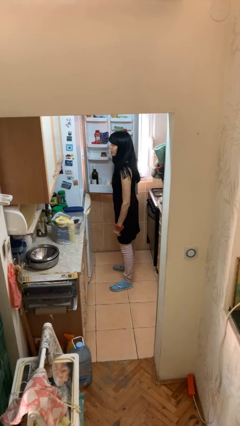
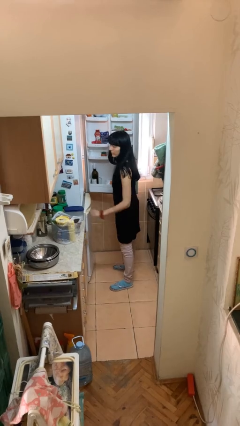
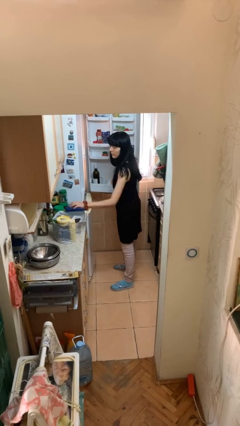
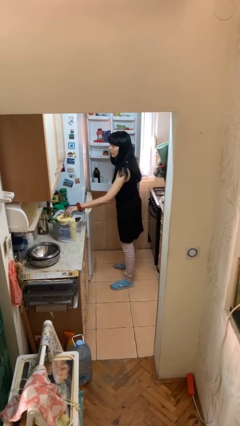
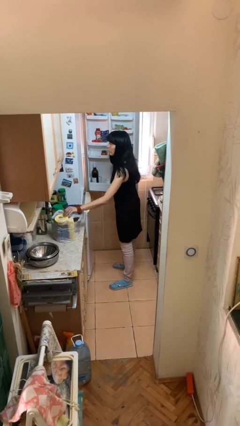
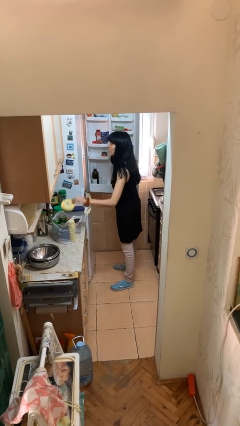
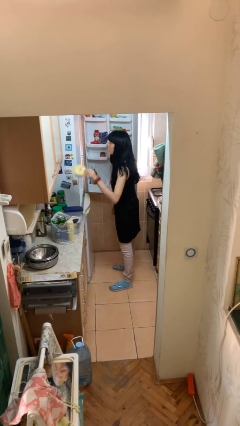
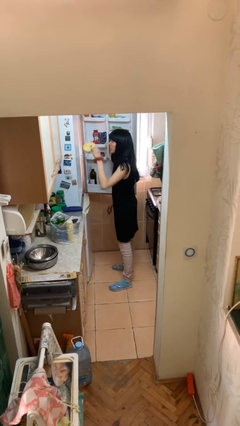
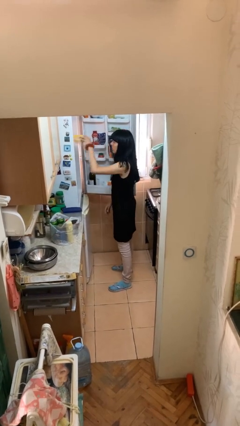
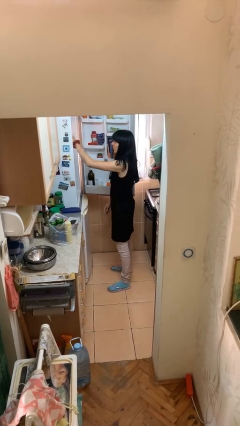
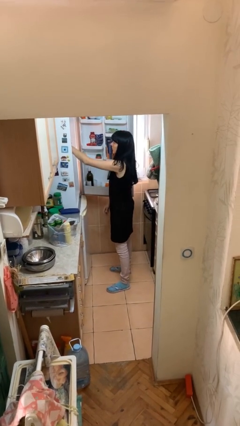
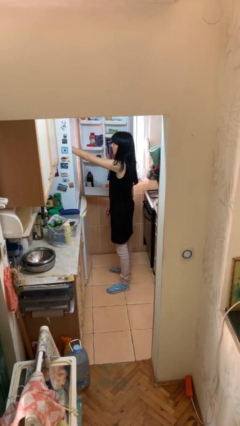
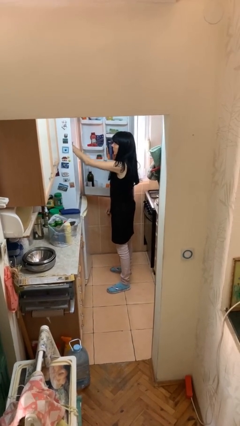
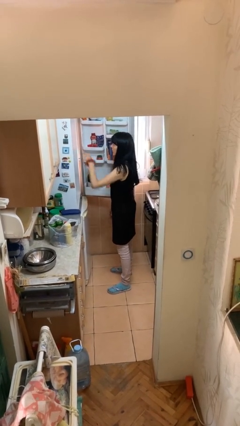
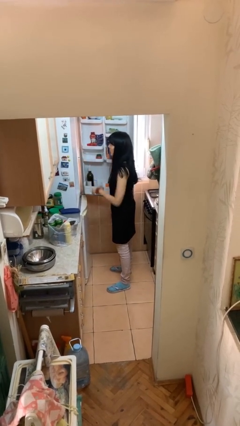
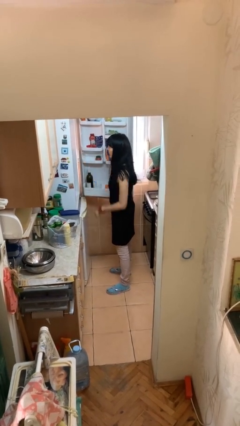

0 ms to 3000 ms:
person loads groceries into refrigerator

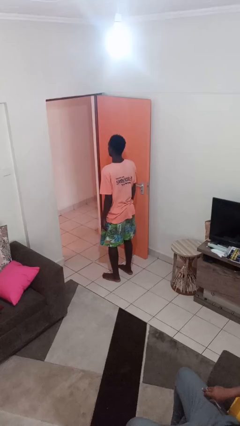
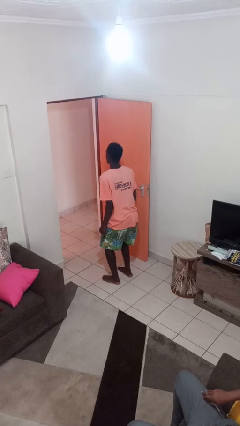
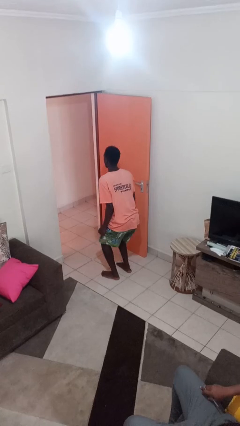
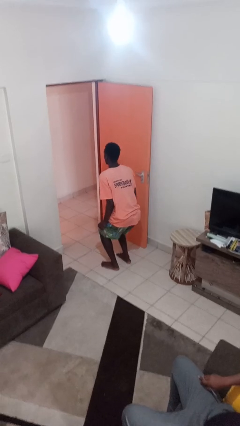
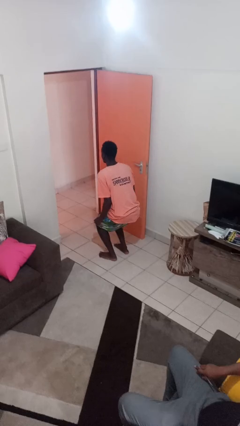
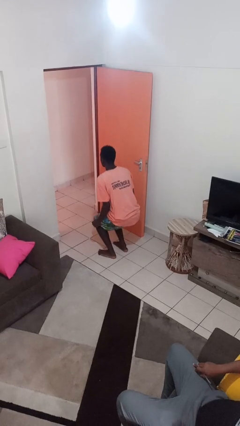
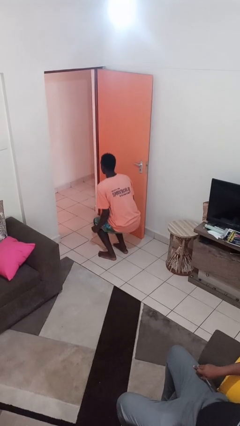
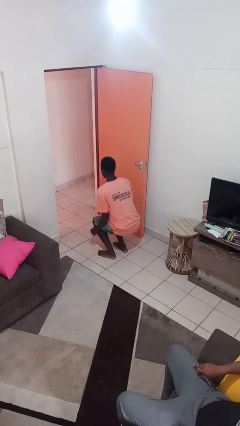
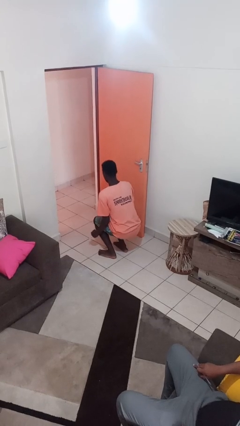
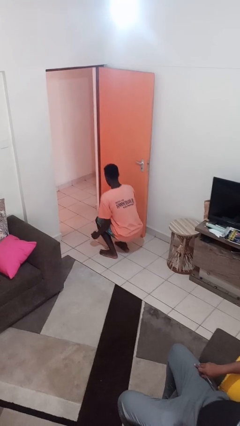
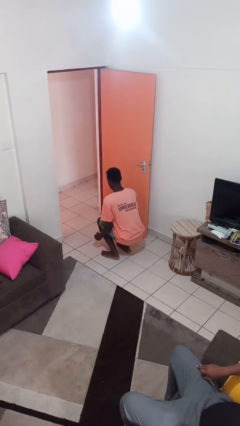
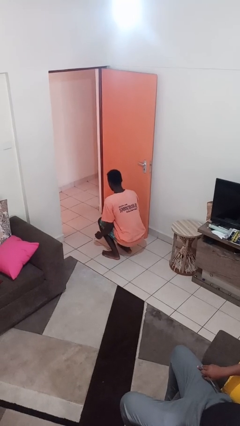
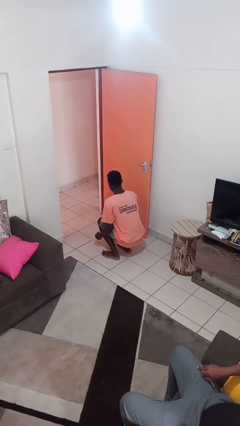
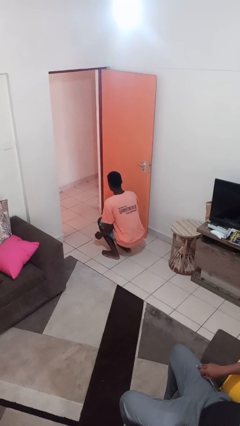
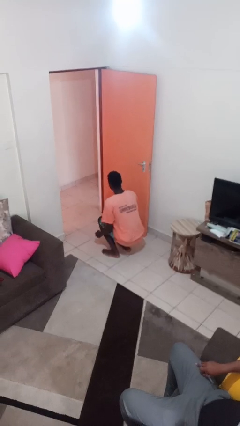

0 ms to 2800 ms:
person squats

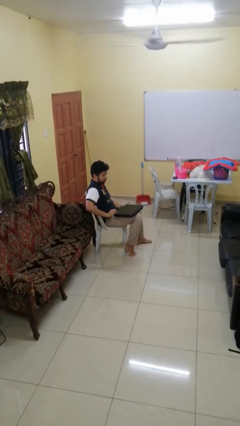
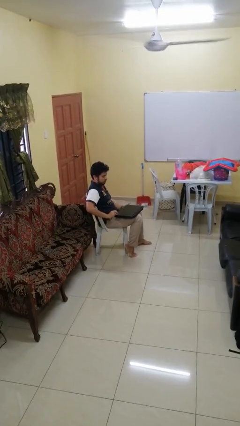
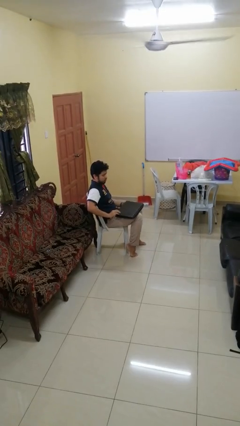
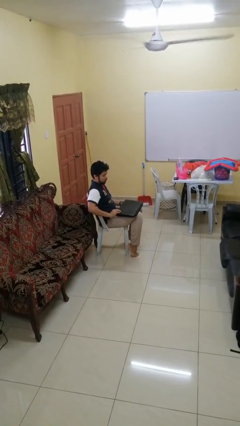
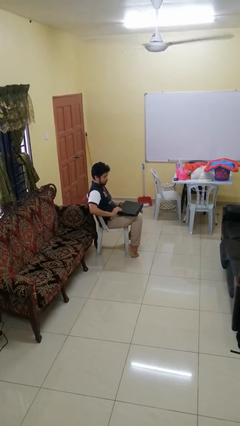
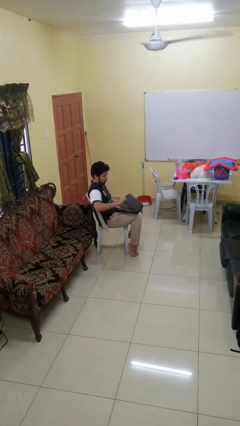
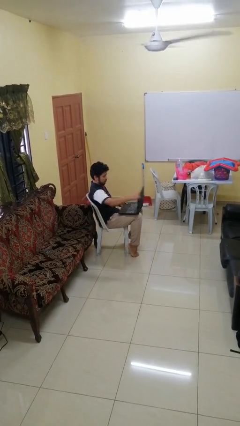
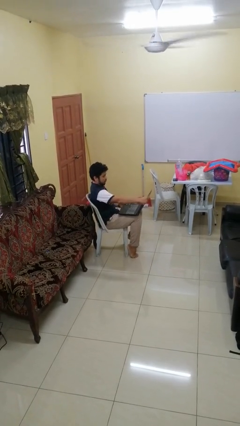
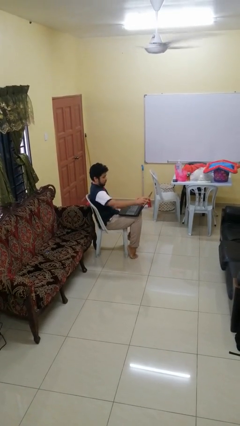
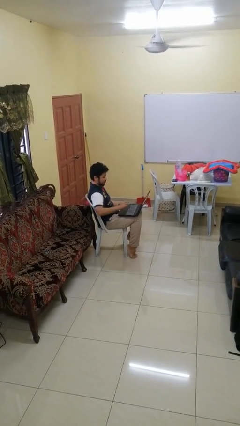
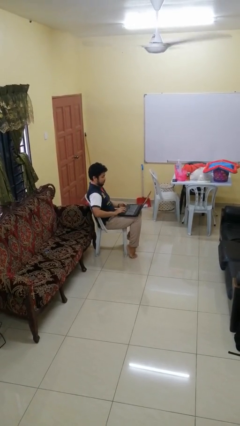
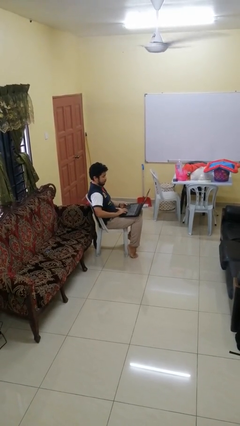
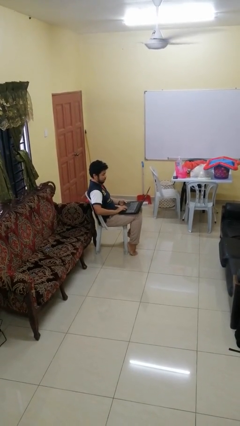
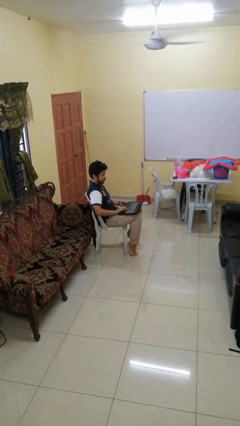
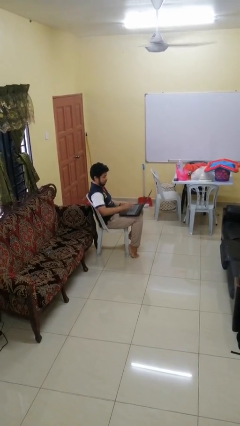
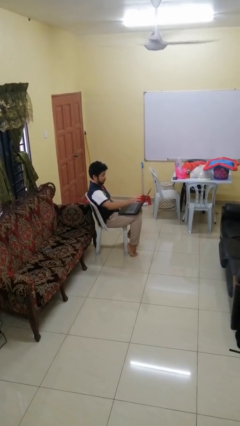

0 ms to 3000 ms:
person opens laptop

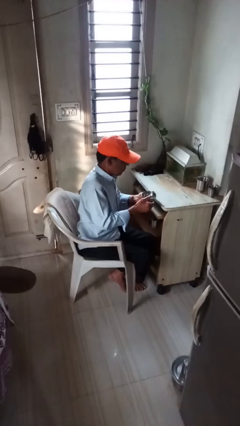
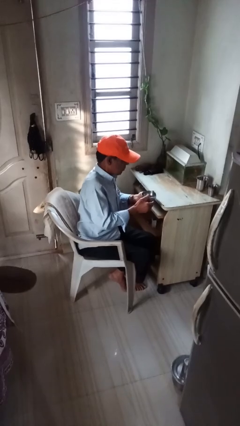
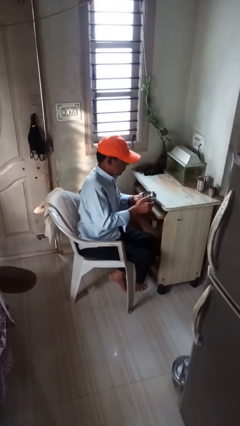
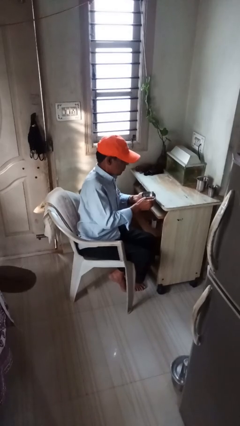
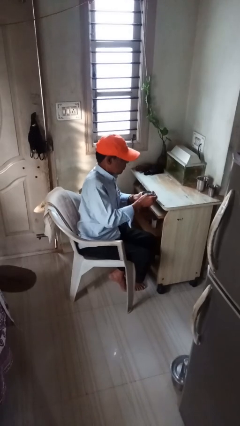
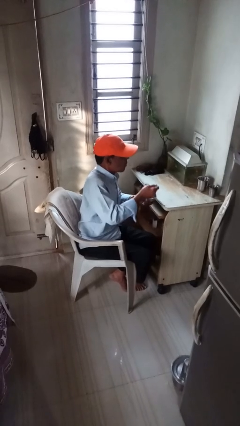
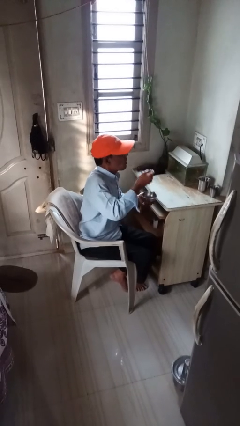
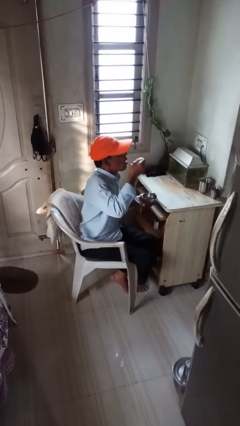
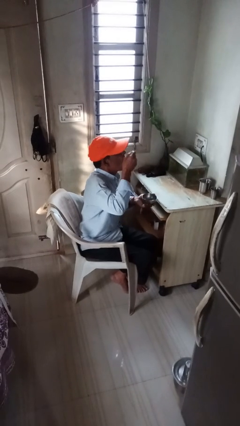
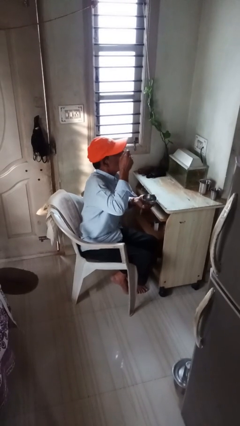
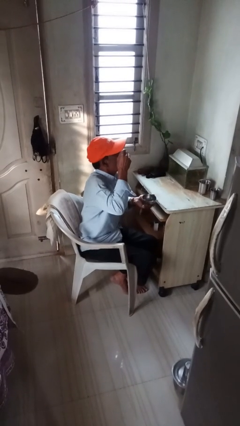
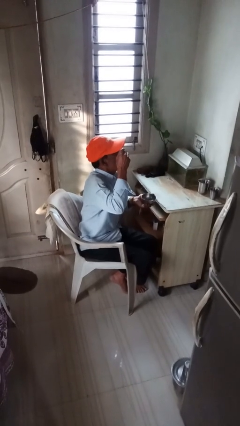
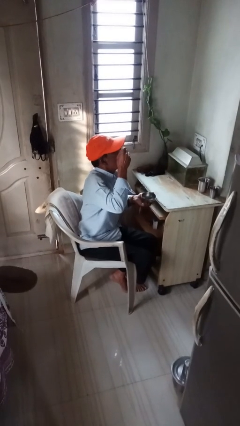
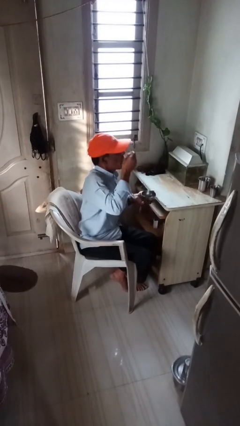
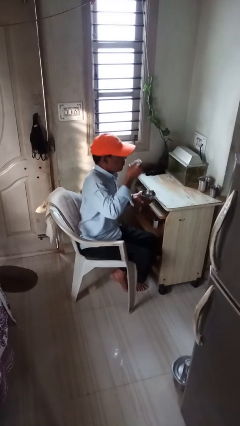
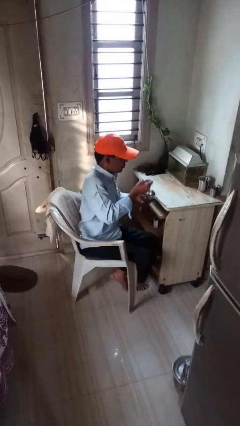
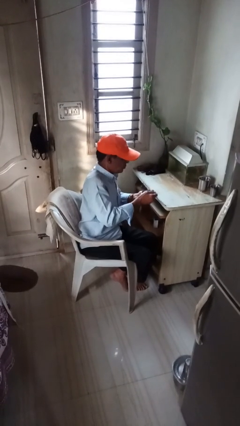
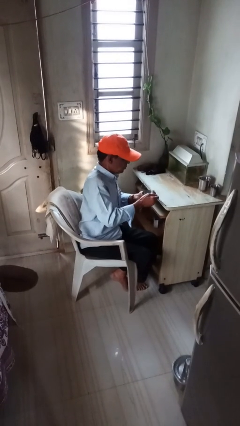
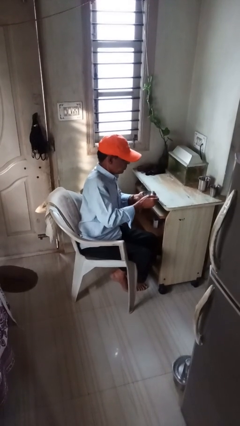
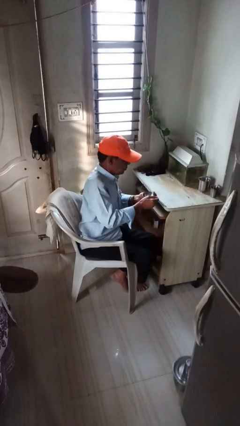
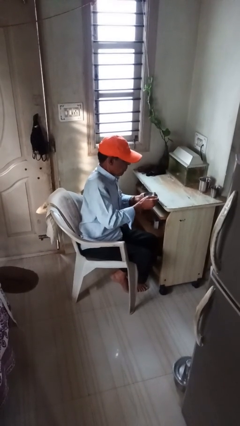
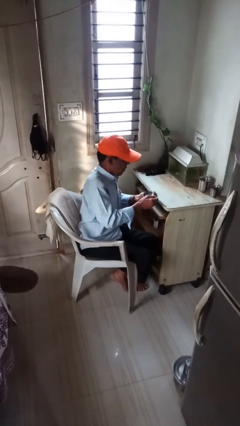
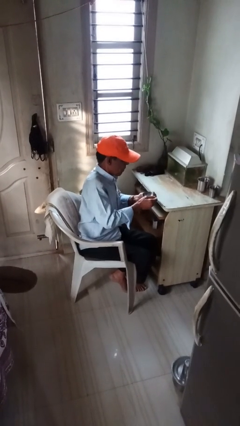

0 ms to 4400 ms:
person eats with utensil

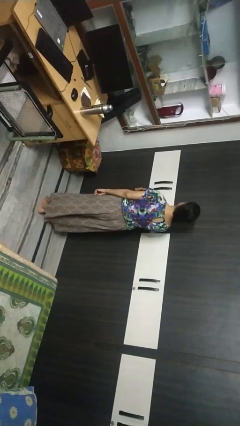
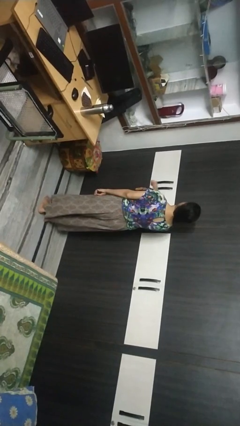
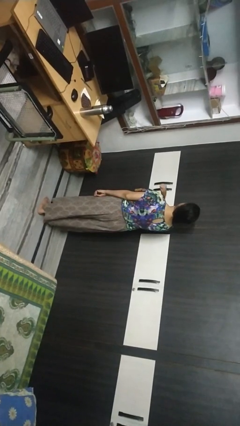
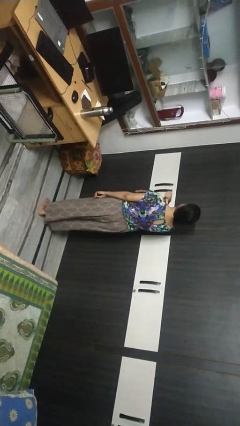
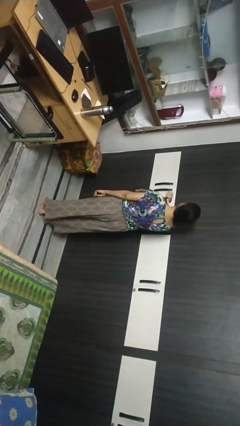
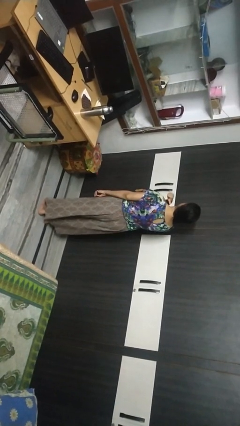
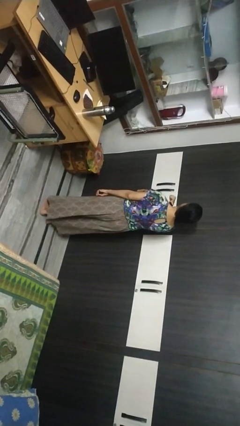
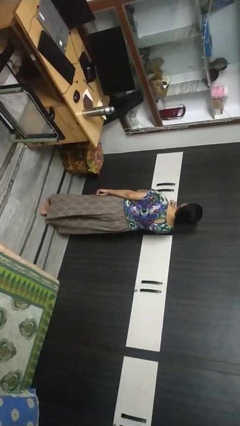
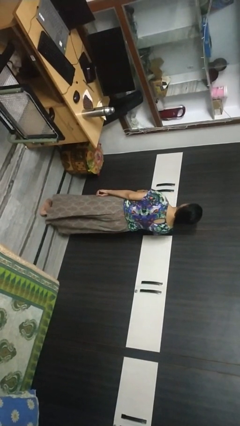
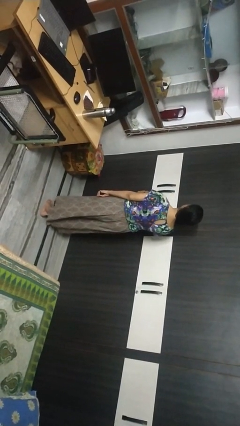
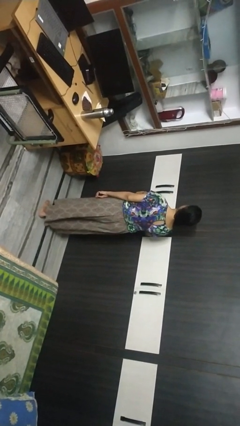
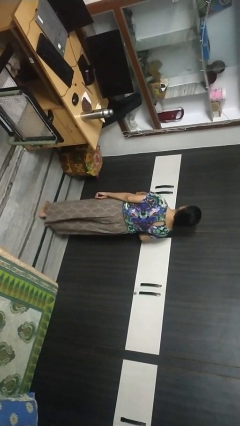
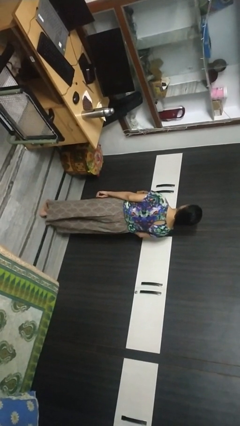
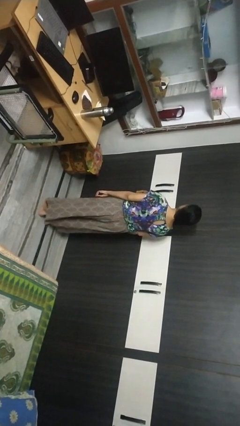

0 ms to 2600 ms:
person gestures cut

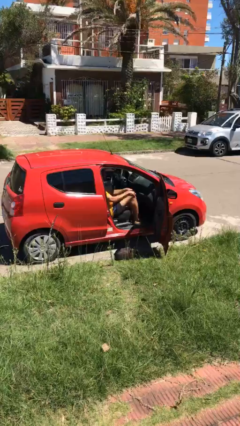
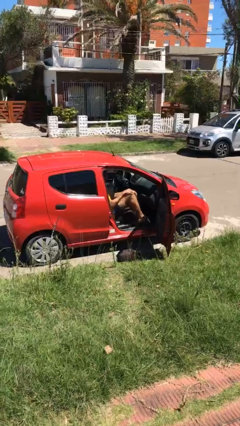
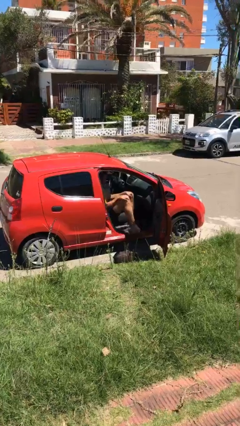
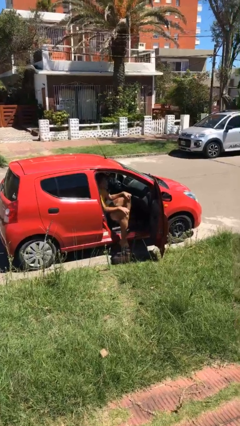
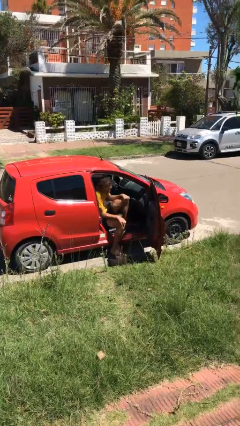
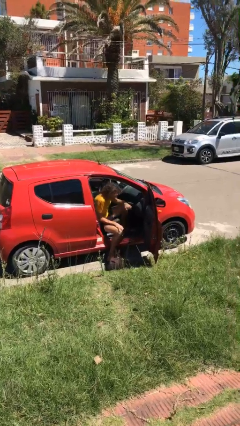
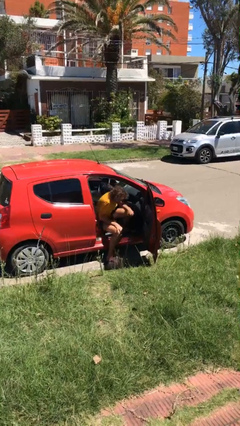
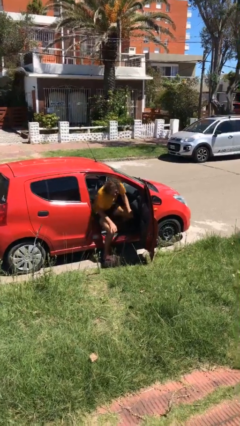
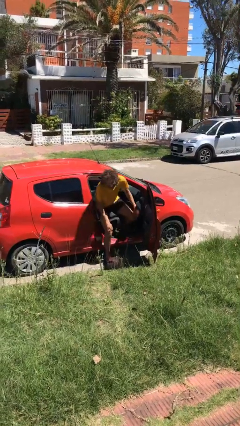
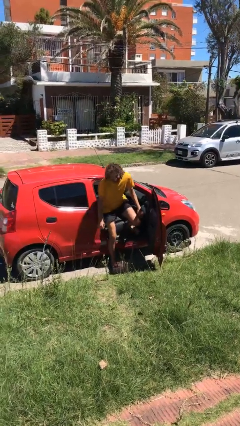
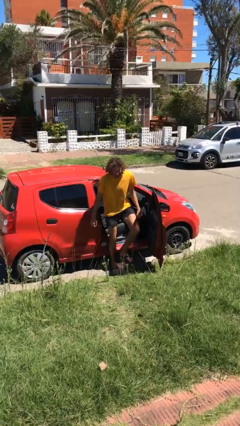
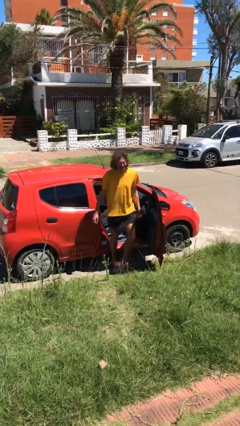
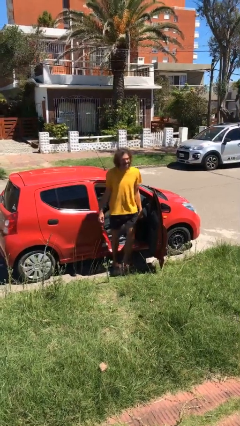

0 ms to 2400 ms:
person exits car
